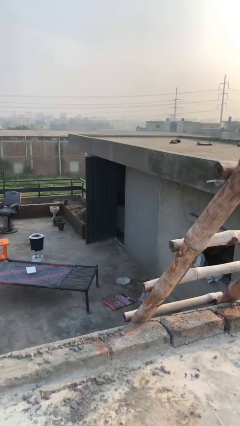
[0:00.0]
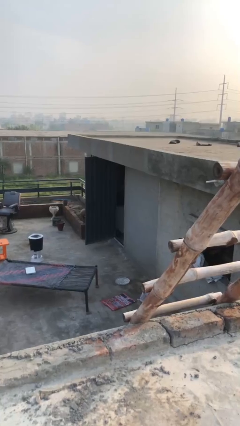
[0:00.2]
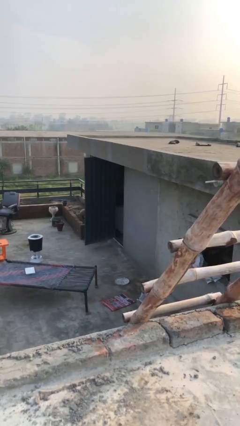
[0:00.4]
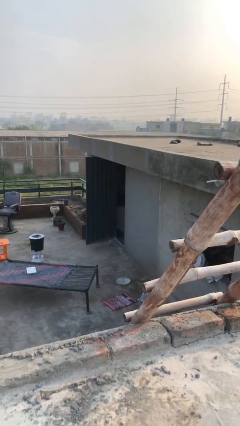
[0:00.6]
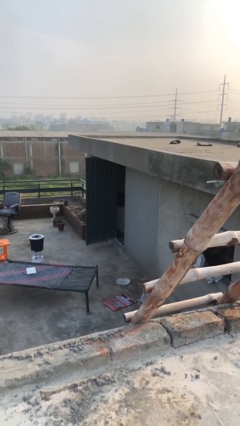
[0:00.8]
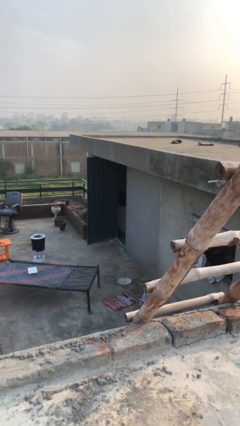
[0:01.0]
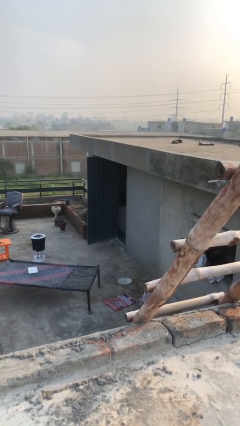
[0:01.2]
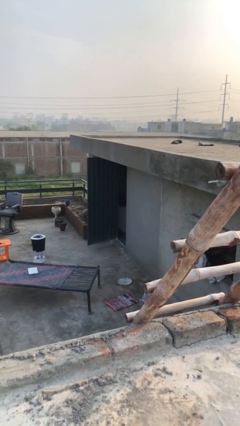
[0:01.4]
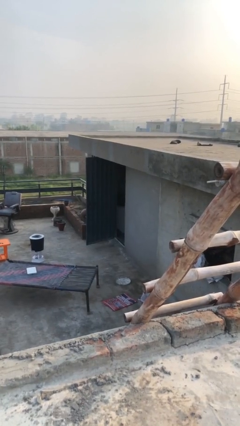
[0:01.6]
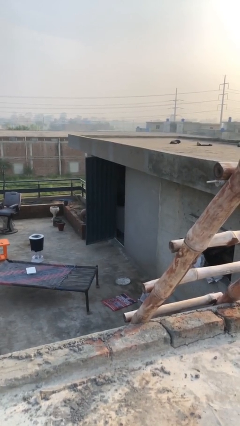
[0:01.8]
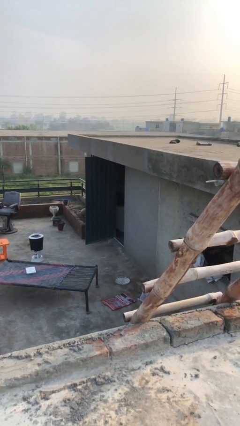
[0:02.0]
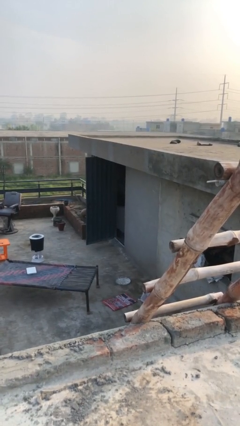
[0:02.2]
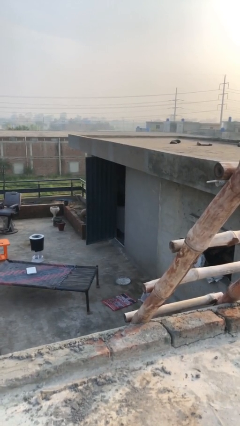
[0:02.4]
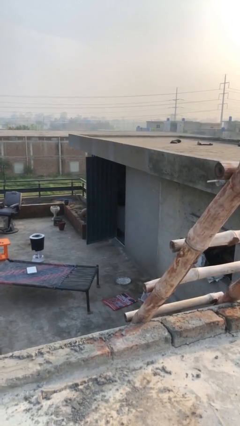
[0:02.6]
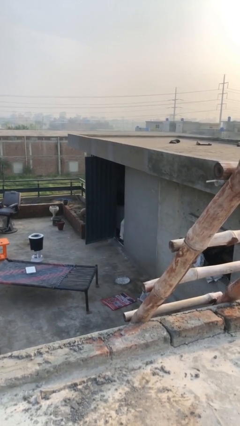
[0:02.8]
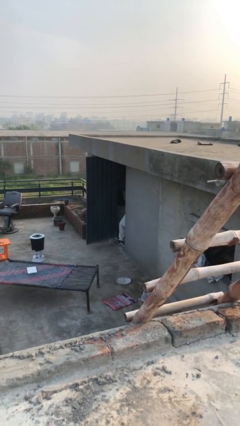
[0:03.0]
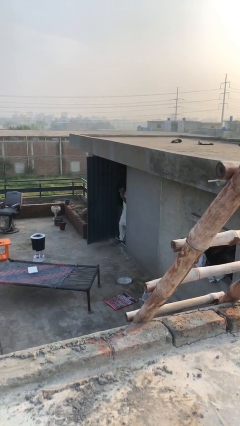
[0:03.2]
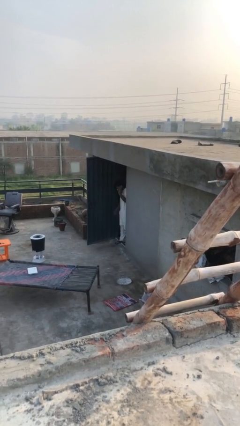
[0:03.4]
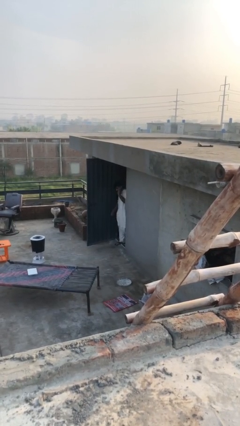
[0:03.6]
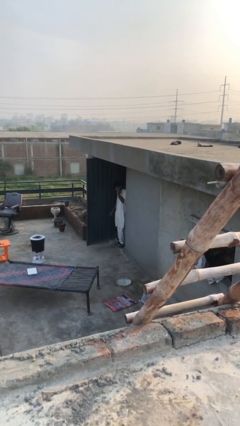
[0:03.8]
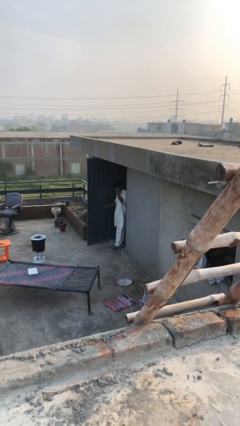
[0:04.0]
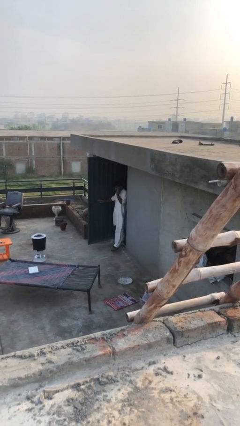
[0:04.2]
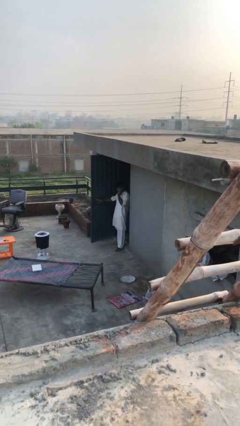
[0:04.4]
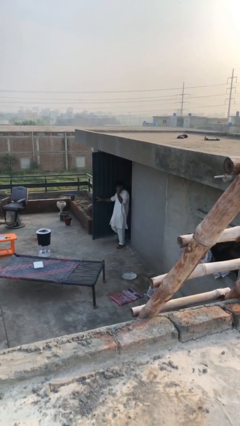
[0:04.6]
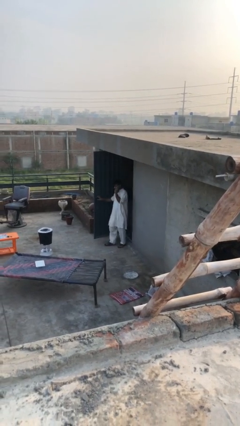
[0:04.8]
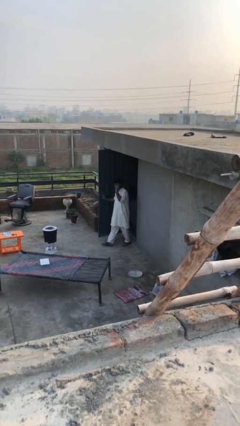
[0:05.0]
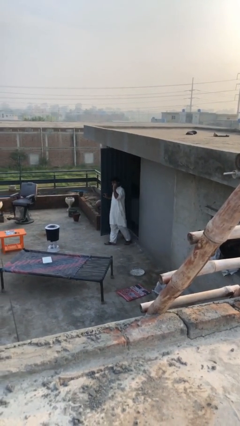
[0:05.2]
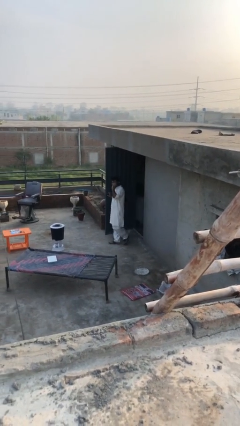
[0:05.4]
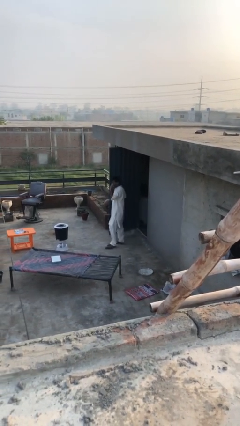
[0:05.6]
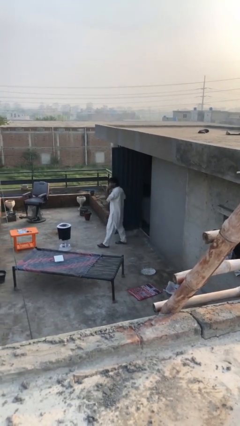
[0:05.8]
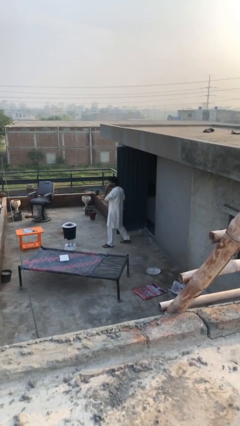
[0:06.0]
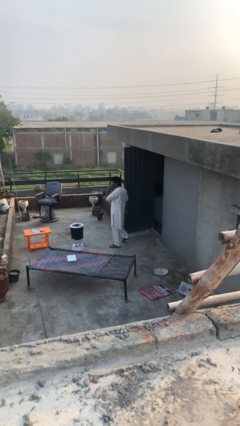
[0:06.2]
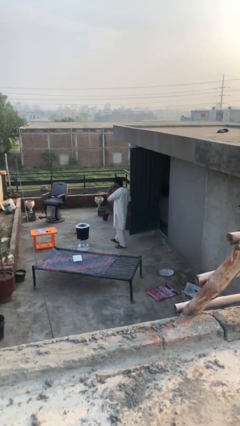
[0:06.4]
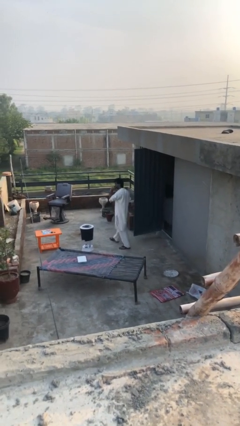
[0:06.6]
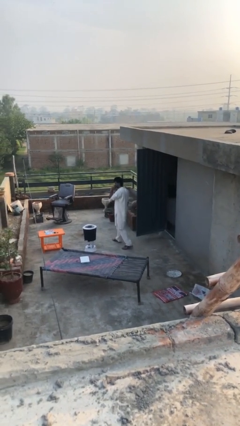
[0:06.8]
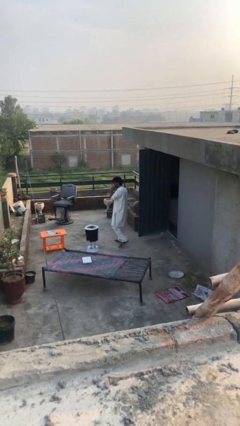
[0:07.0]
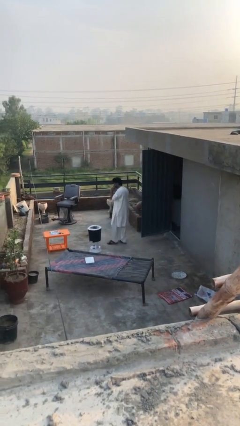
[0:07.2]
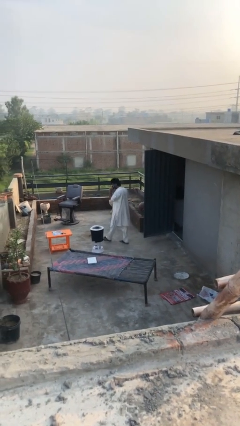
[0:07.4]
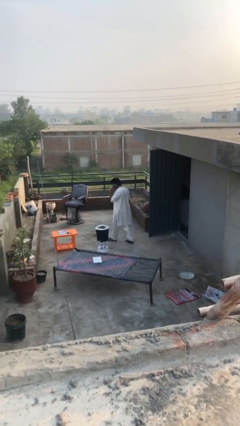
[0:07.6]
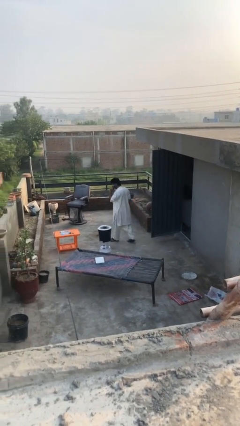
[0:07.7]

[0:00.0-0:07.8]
person enters scene through structure

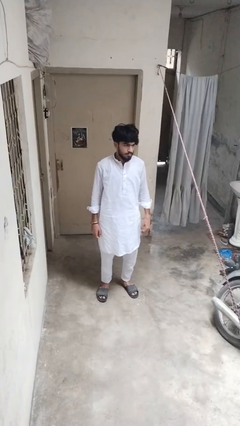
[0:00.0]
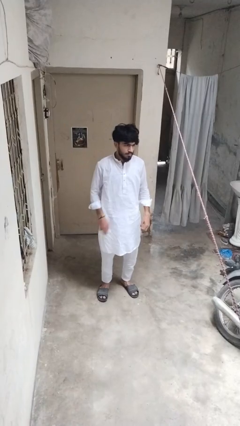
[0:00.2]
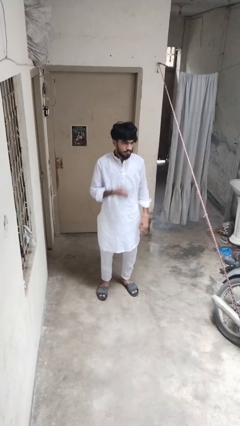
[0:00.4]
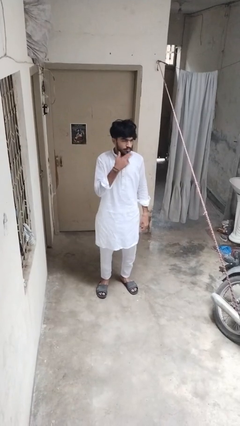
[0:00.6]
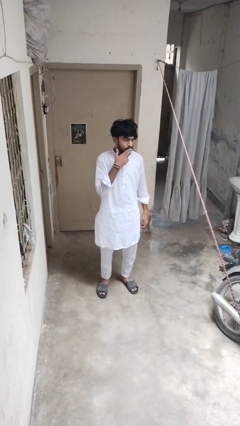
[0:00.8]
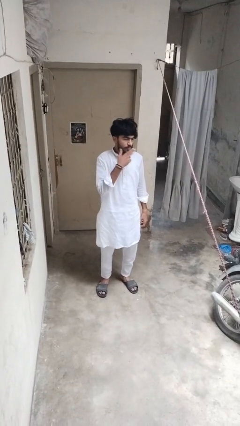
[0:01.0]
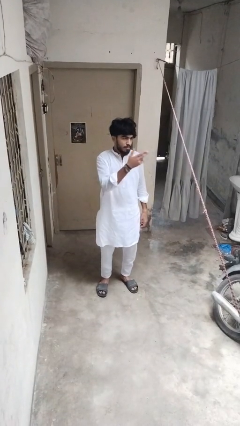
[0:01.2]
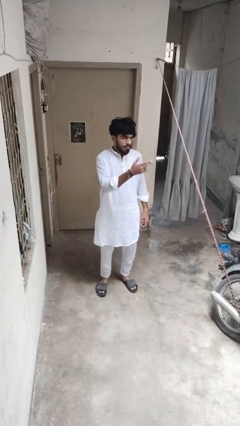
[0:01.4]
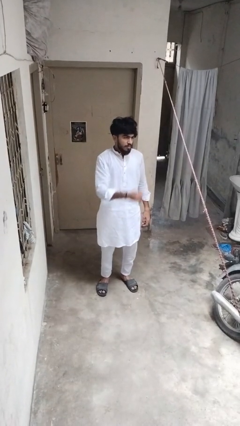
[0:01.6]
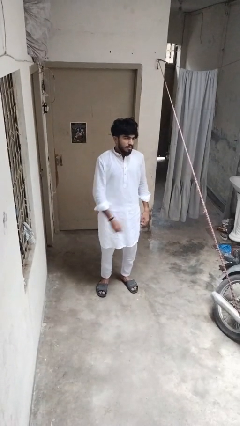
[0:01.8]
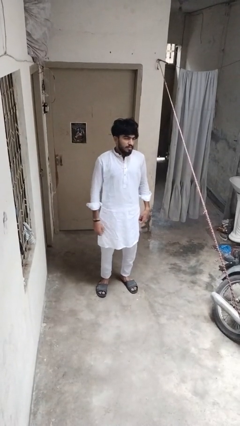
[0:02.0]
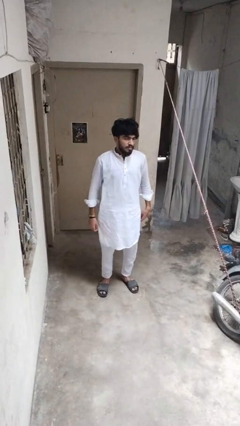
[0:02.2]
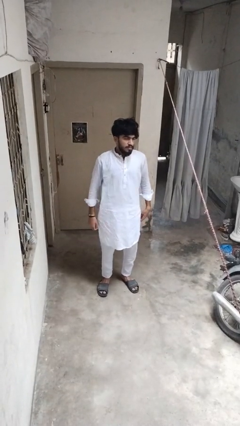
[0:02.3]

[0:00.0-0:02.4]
person gestures blow kiss

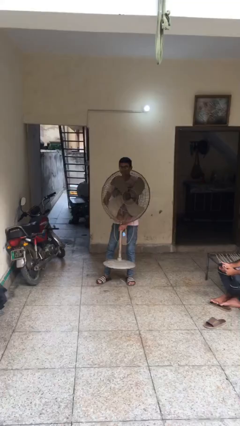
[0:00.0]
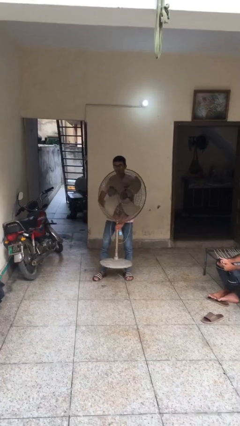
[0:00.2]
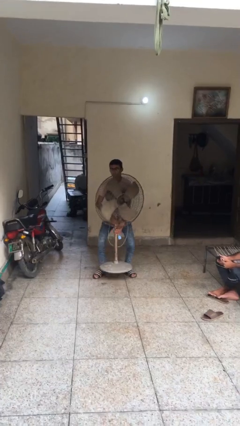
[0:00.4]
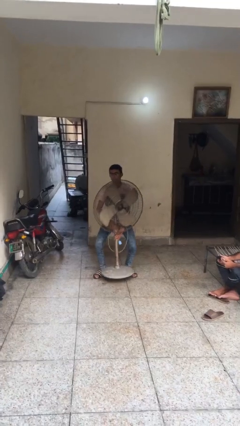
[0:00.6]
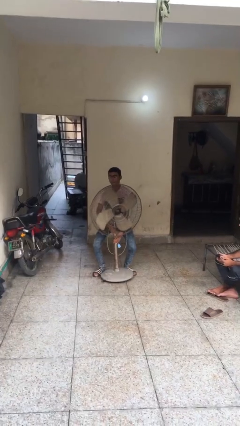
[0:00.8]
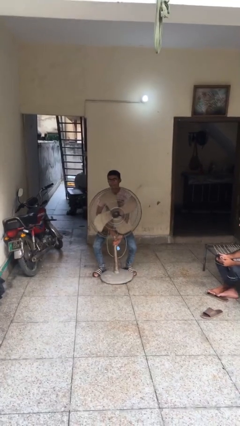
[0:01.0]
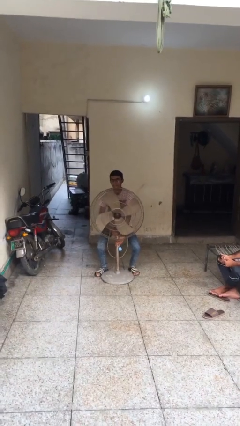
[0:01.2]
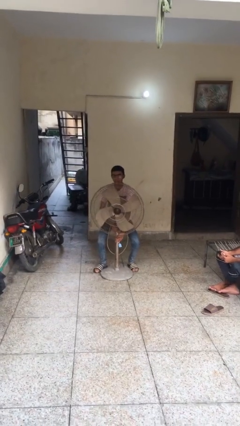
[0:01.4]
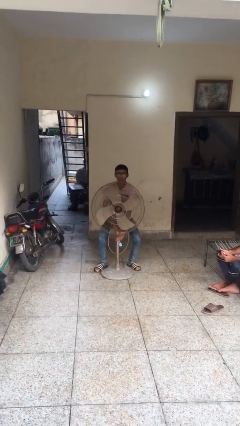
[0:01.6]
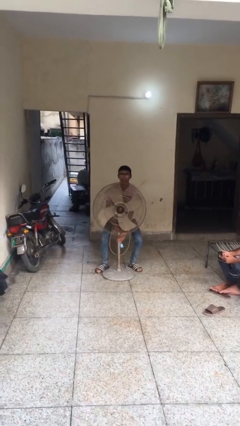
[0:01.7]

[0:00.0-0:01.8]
person puts down object on floor

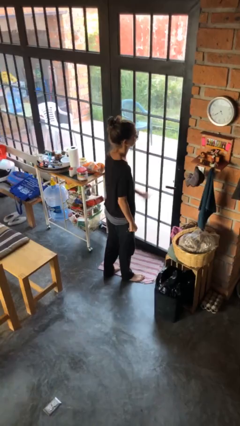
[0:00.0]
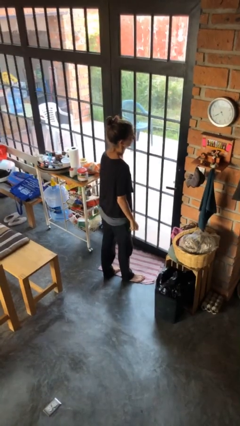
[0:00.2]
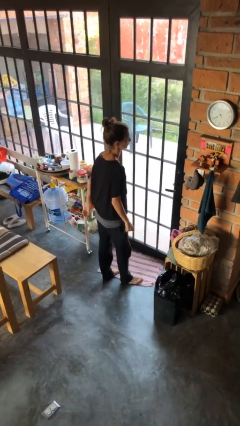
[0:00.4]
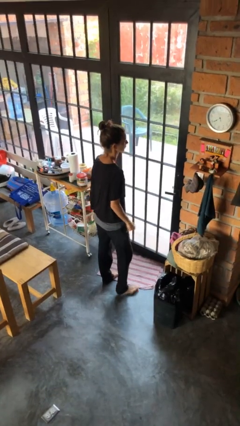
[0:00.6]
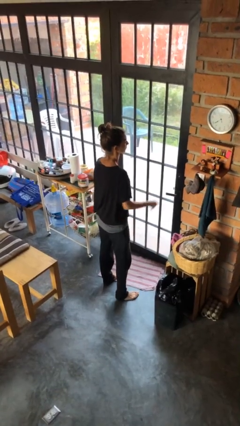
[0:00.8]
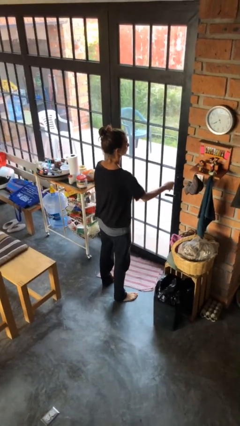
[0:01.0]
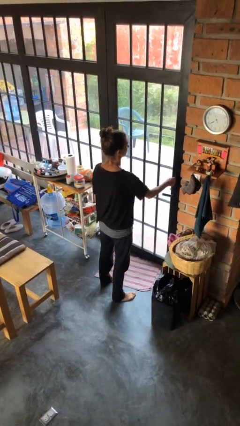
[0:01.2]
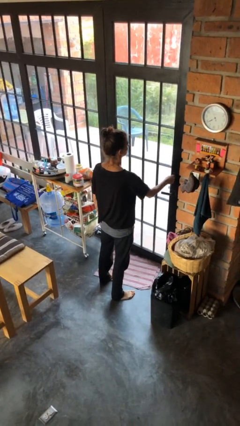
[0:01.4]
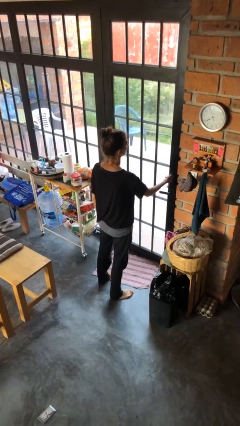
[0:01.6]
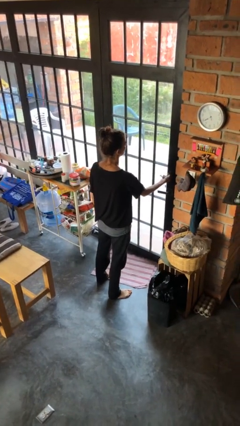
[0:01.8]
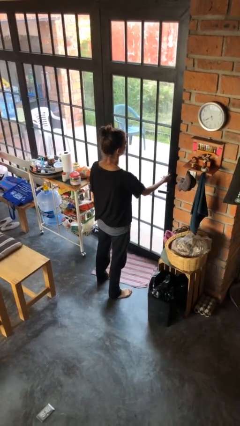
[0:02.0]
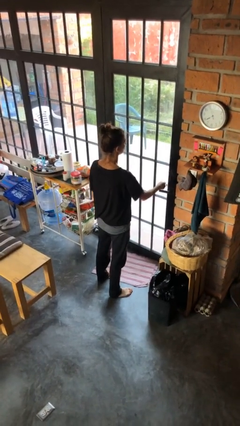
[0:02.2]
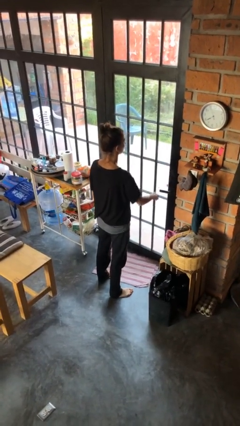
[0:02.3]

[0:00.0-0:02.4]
person locks door with keys

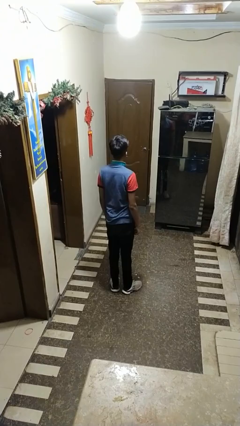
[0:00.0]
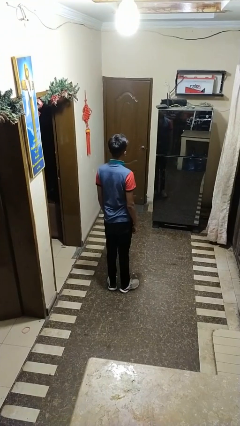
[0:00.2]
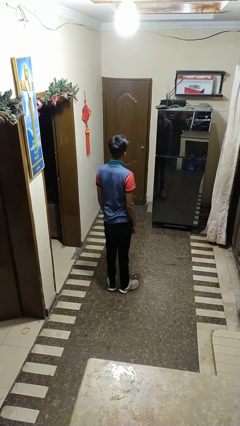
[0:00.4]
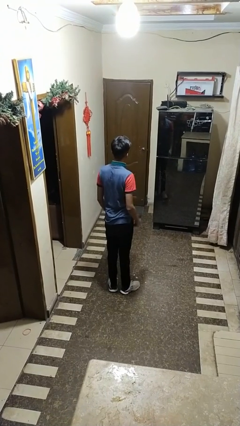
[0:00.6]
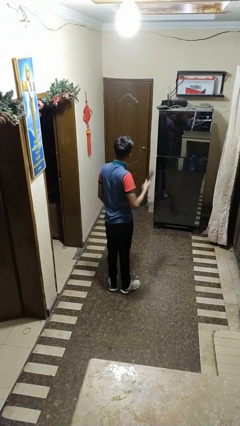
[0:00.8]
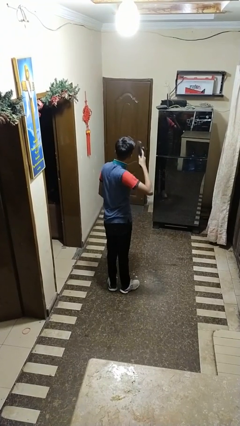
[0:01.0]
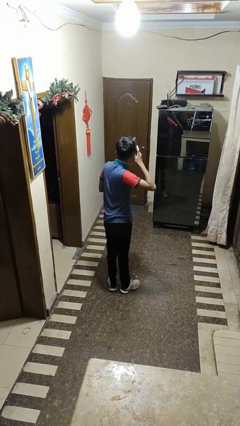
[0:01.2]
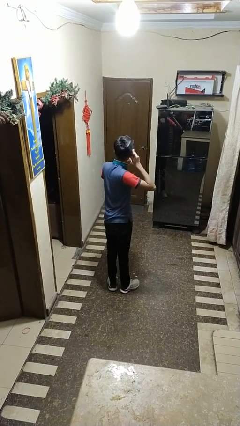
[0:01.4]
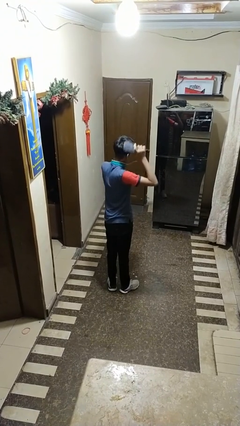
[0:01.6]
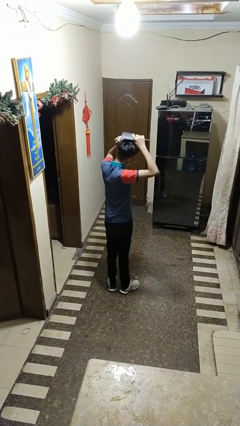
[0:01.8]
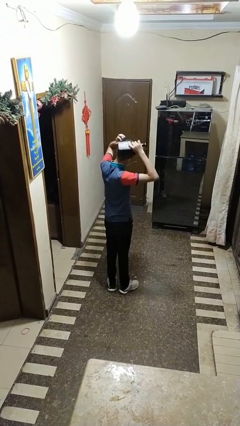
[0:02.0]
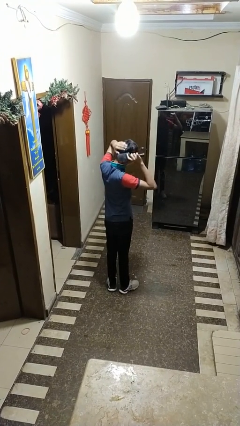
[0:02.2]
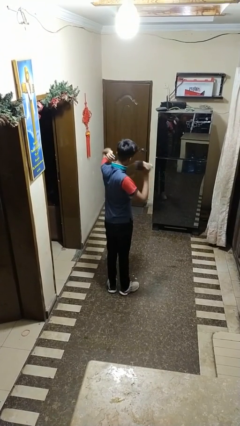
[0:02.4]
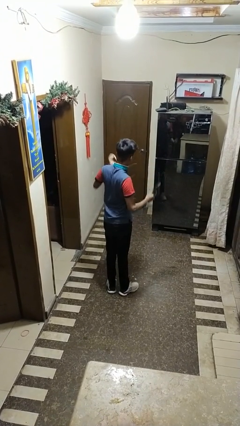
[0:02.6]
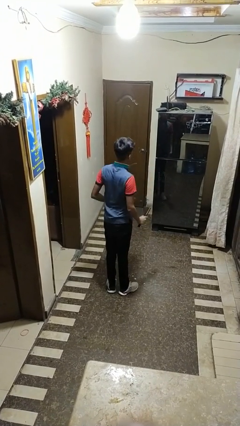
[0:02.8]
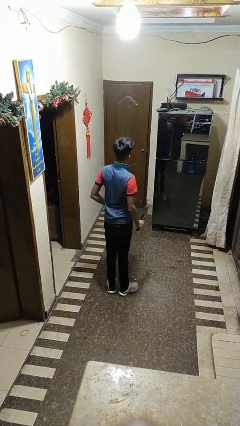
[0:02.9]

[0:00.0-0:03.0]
person brushes hair
